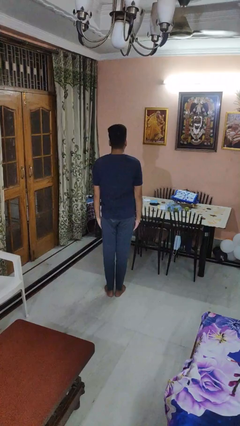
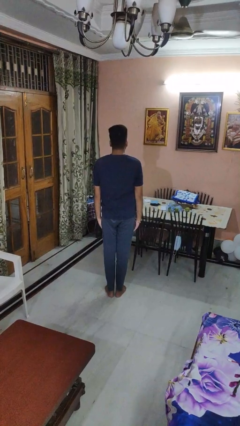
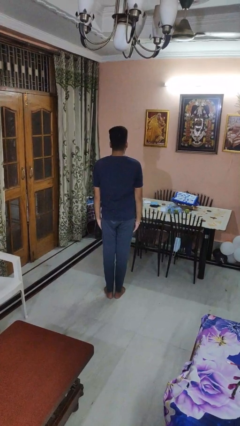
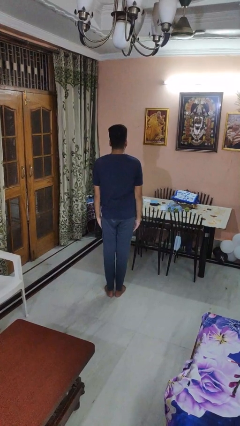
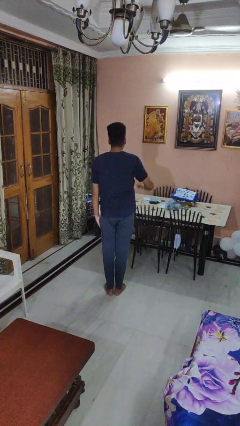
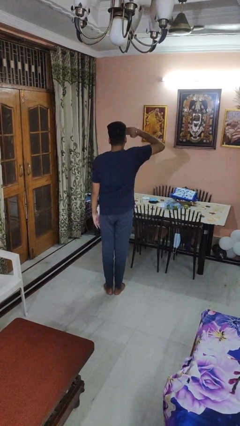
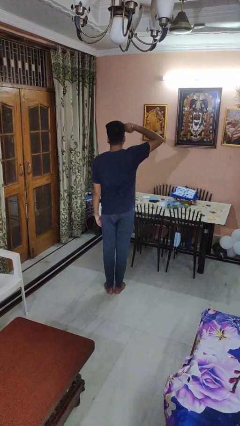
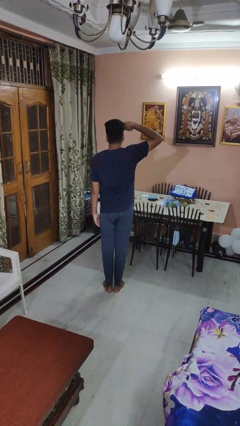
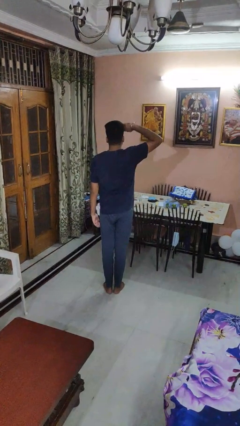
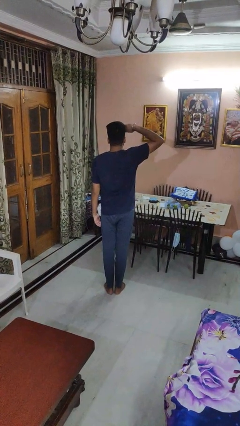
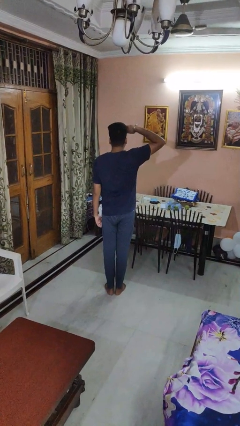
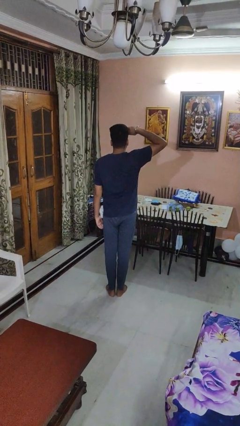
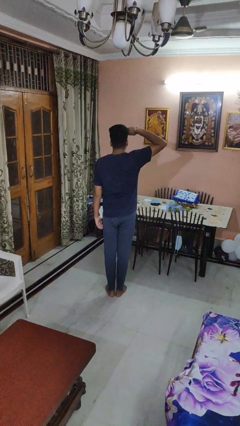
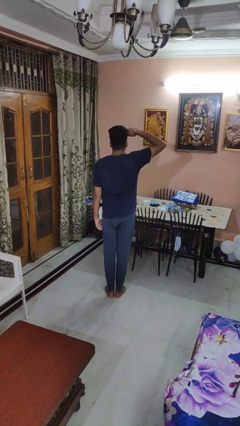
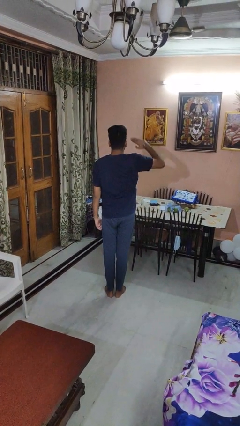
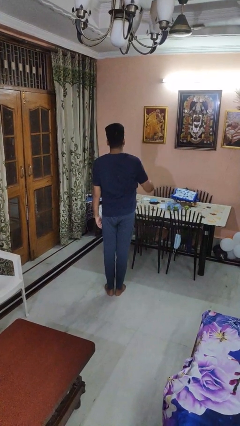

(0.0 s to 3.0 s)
person salutes

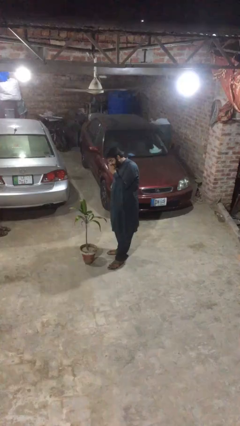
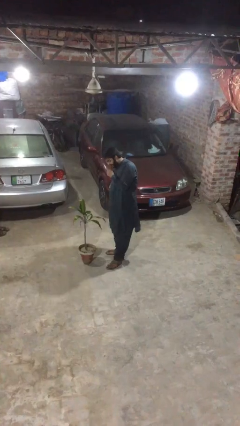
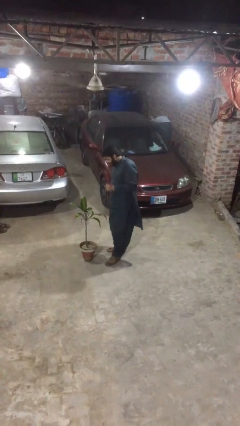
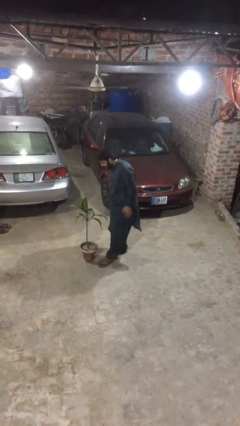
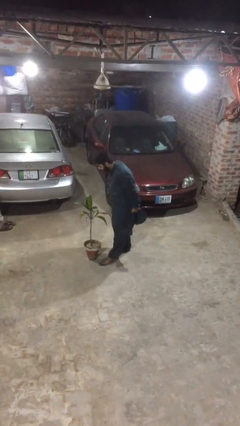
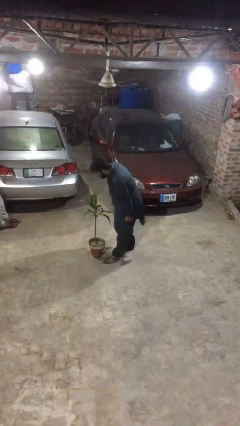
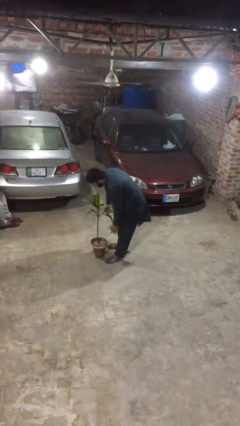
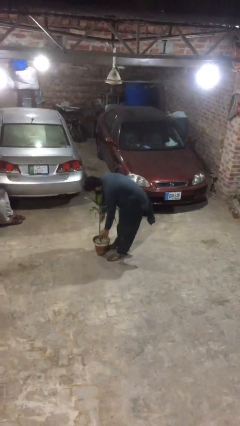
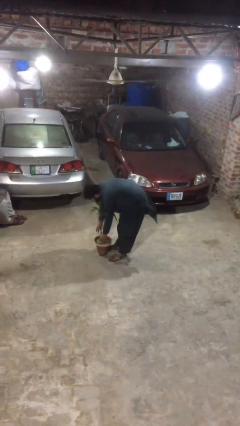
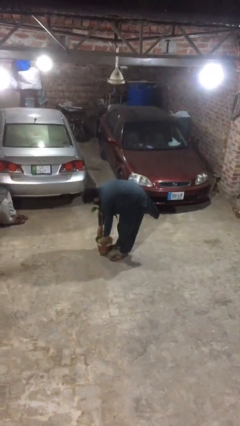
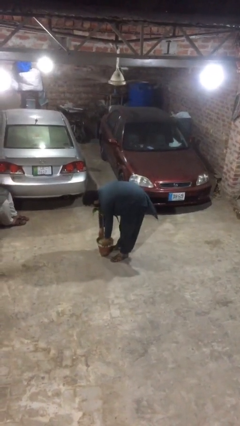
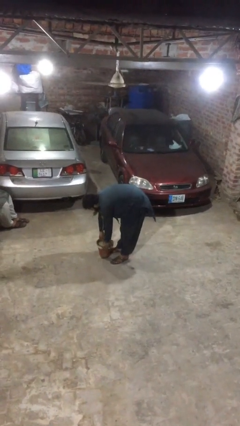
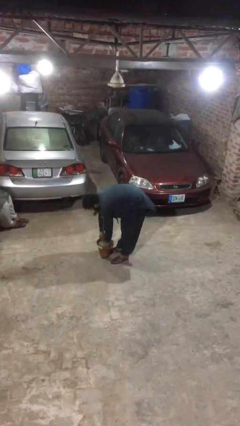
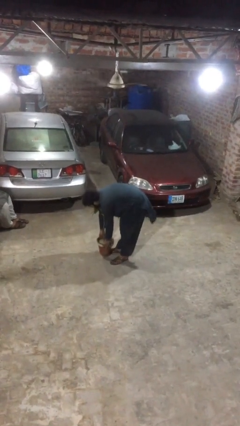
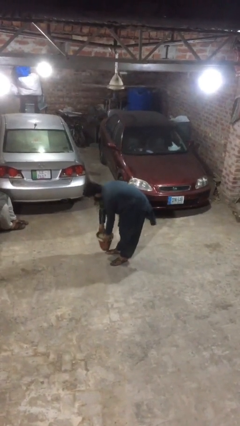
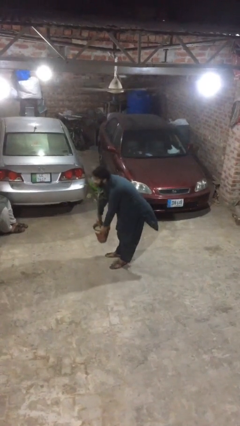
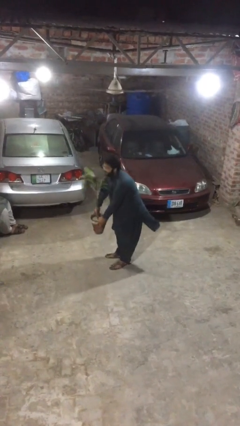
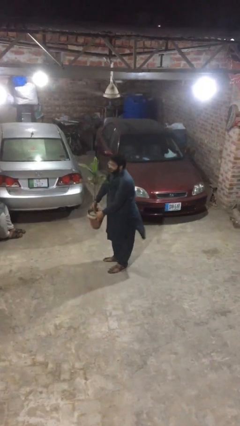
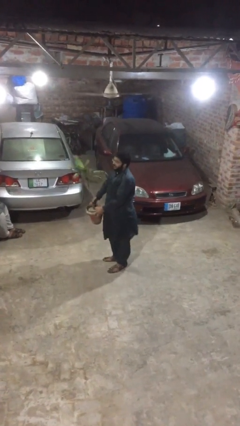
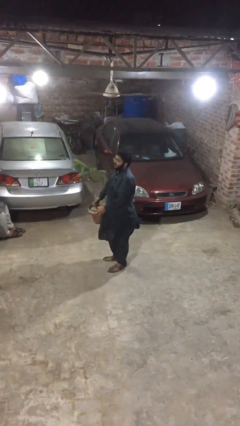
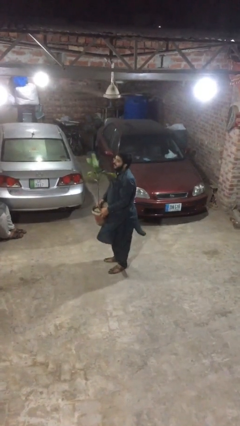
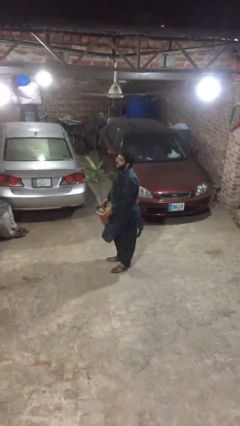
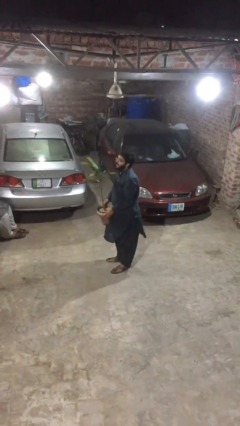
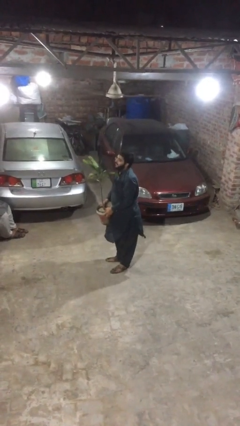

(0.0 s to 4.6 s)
person picks up object from floor

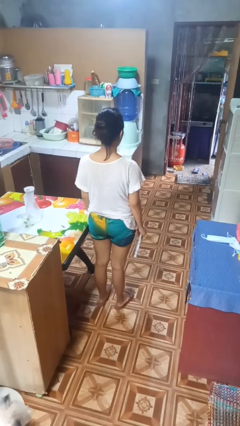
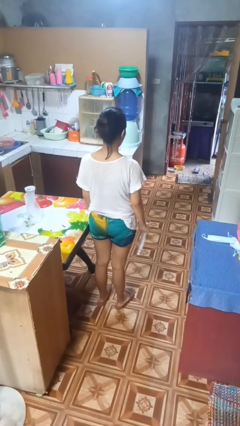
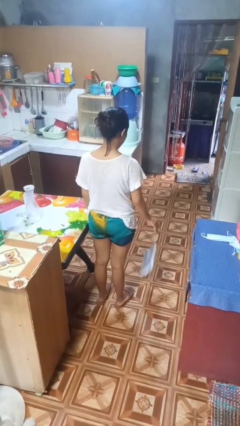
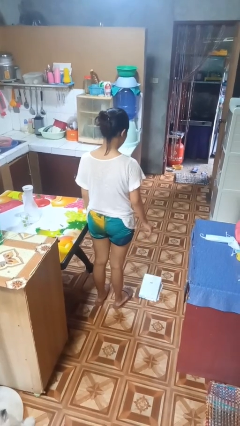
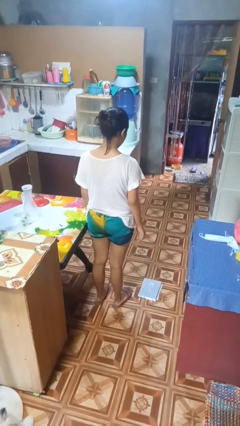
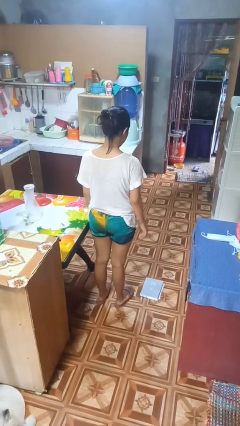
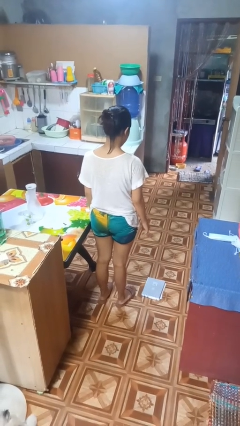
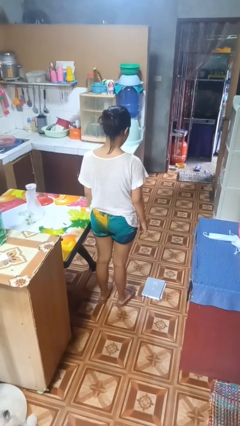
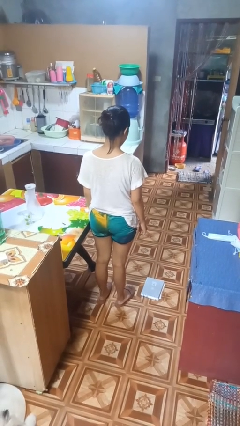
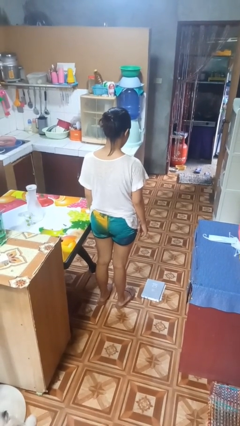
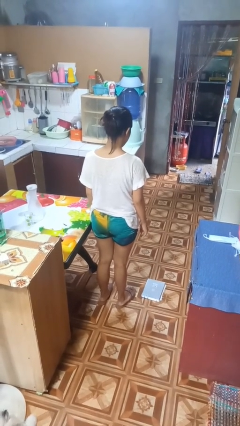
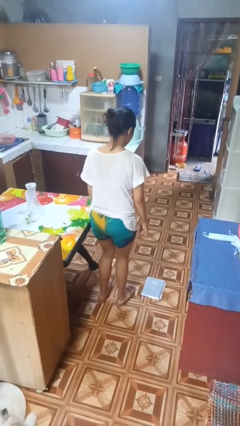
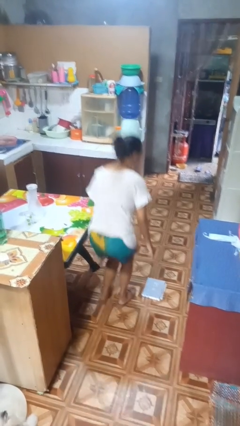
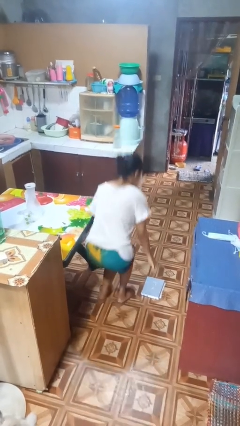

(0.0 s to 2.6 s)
person drops object

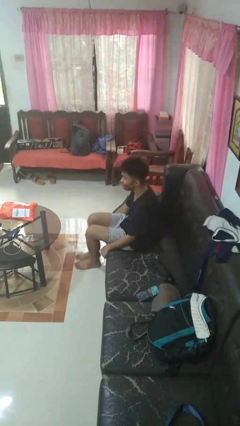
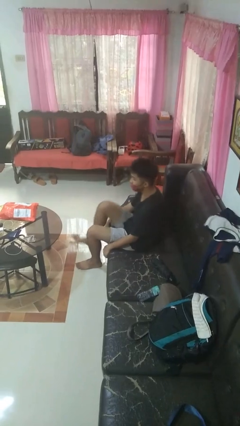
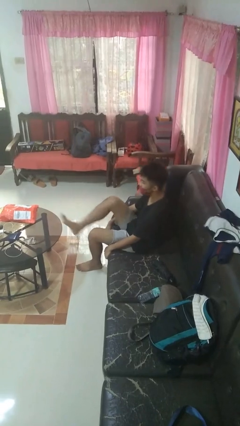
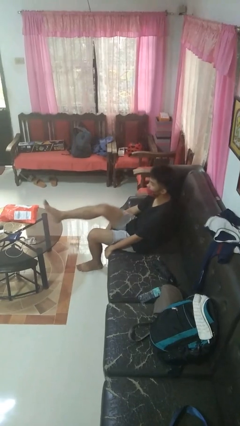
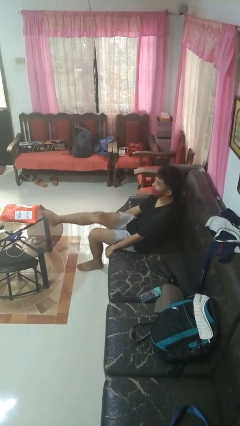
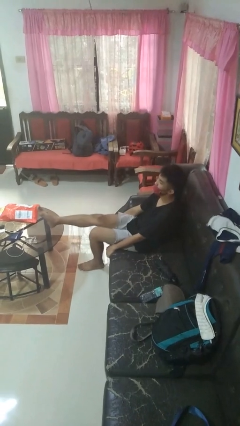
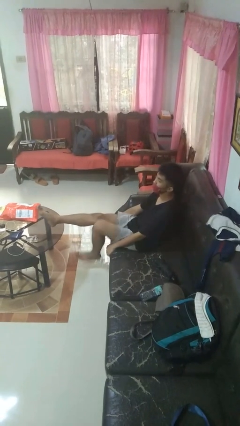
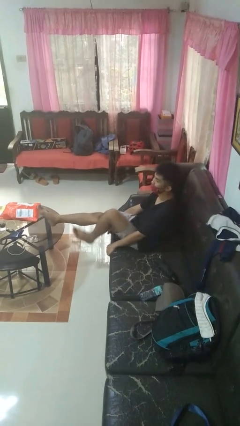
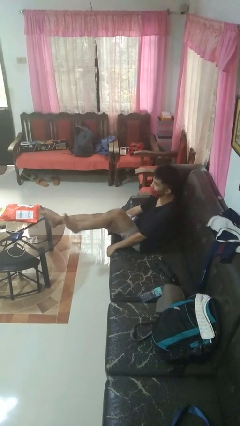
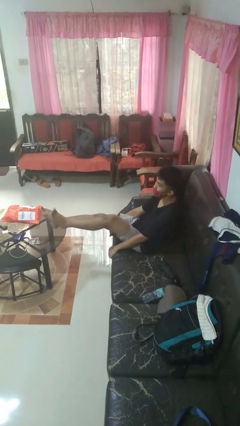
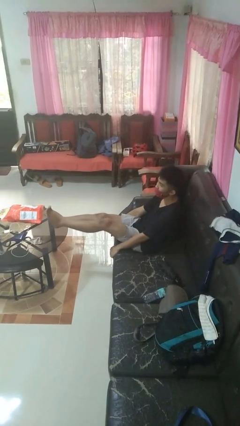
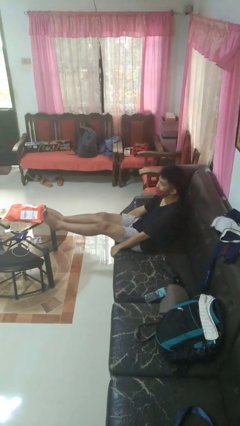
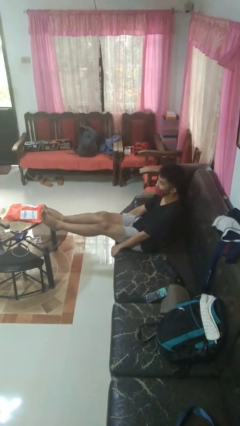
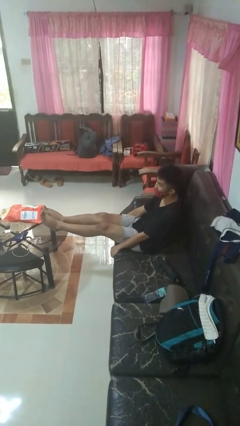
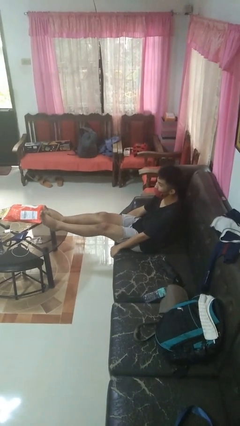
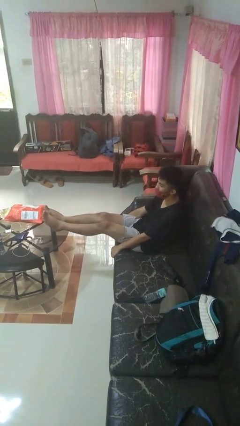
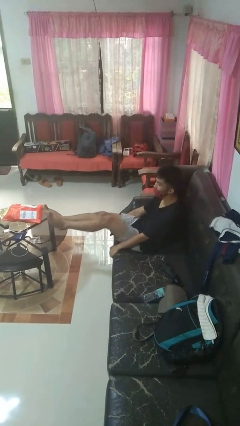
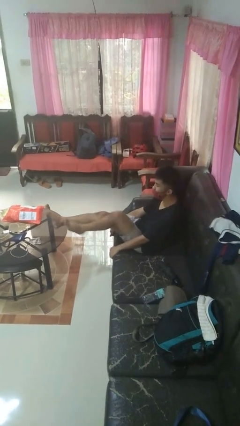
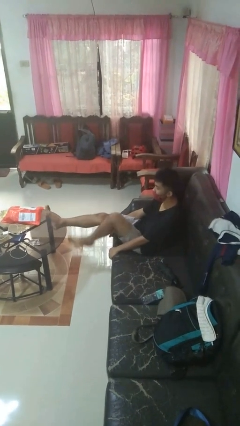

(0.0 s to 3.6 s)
person puts feet up

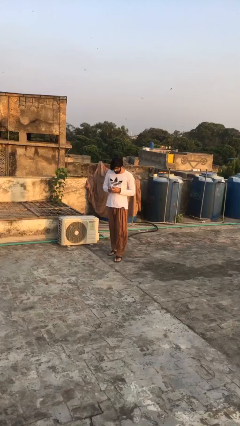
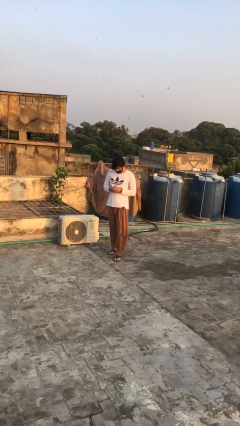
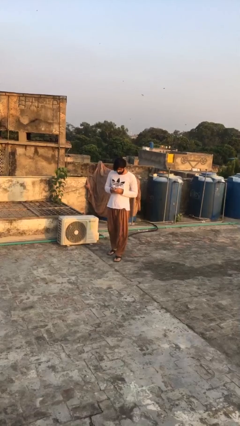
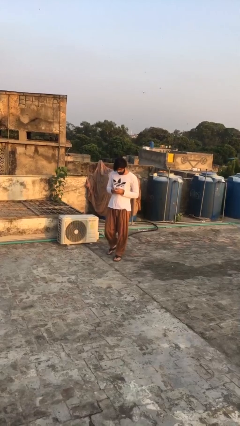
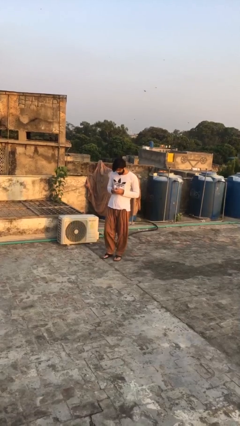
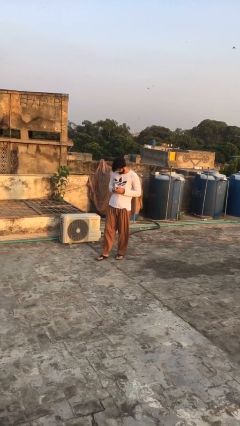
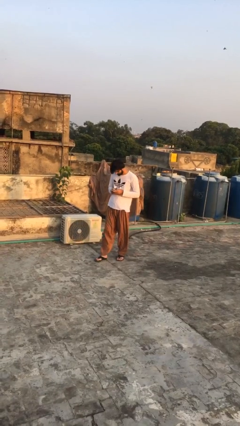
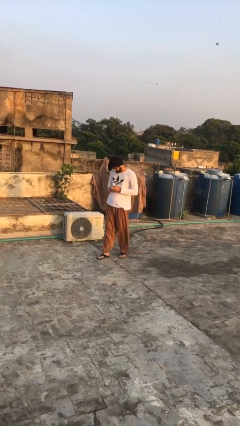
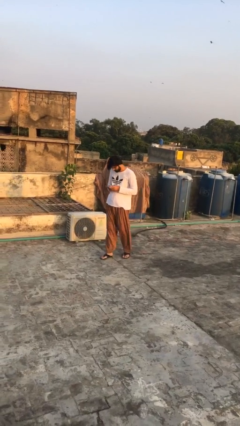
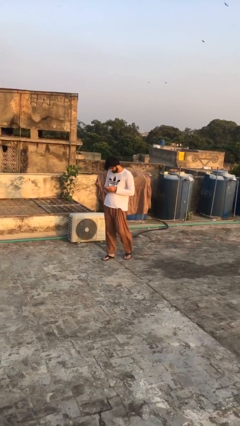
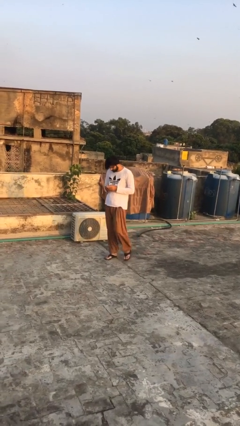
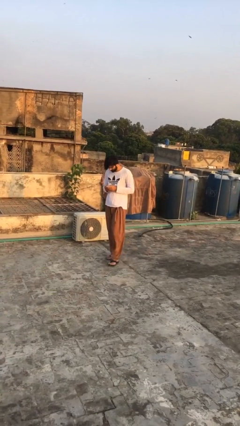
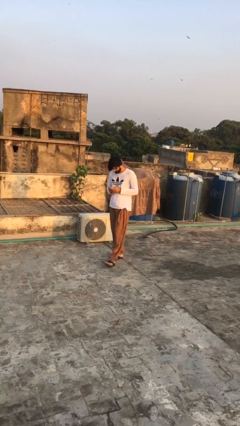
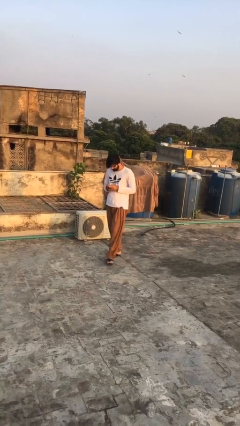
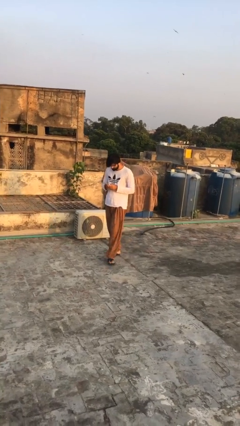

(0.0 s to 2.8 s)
person texts on phone

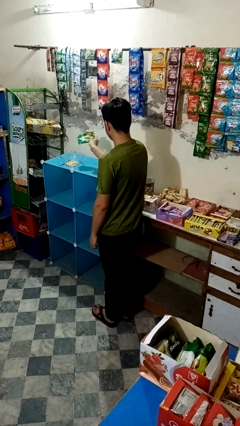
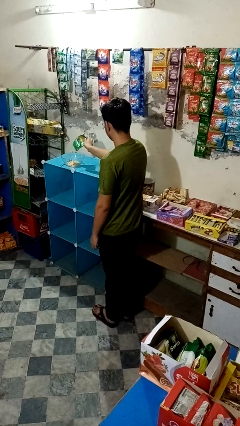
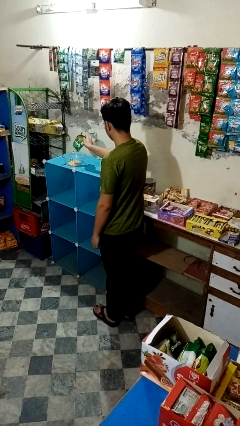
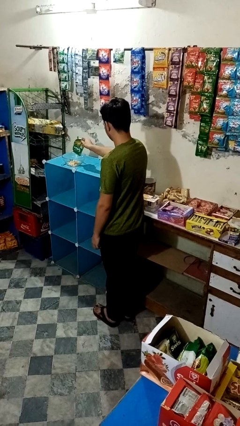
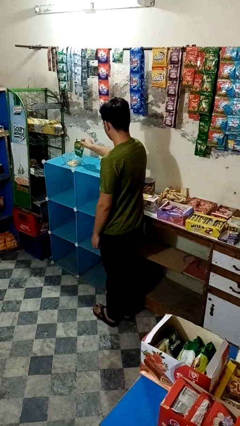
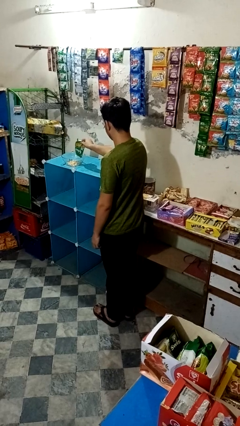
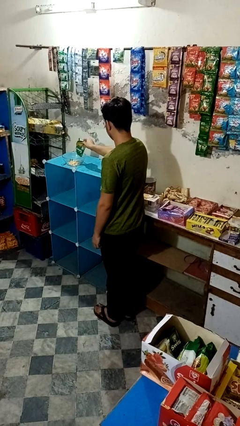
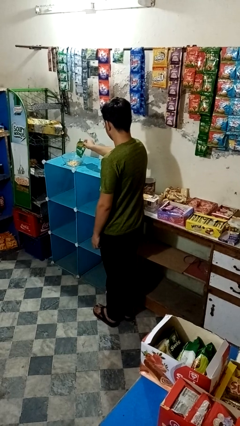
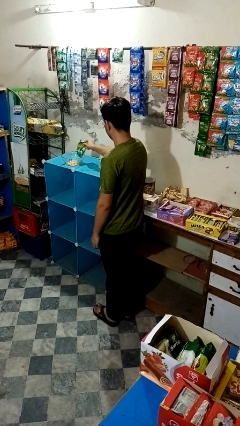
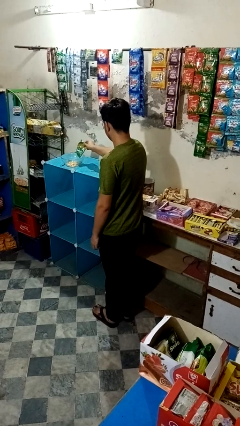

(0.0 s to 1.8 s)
person pours into bowl
